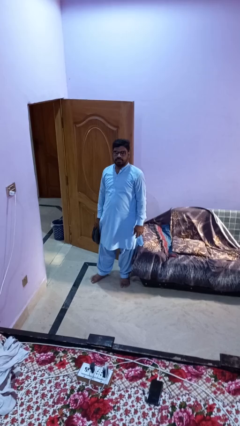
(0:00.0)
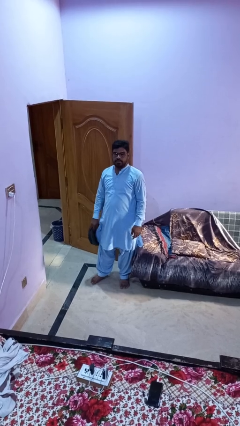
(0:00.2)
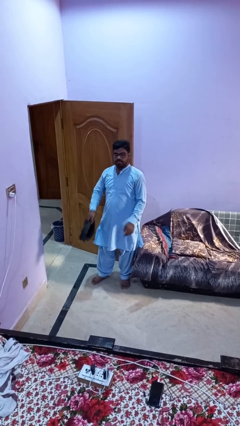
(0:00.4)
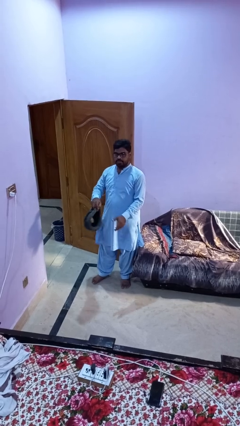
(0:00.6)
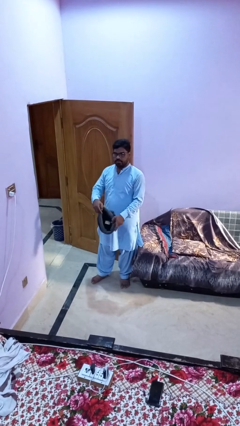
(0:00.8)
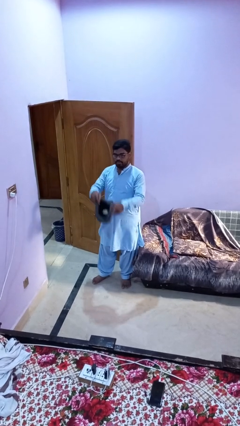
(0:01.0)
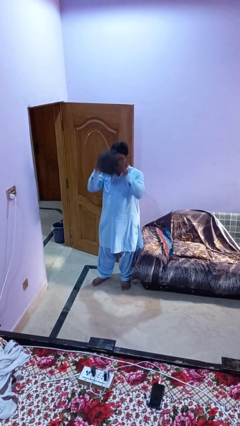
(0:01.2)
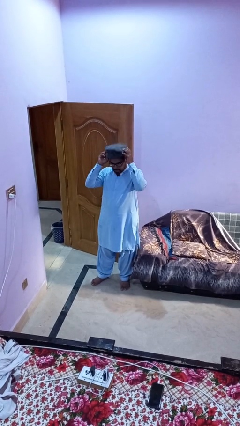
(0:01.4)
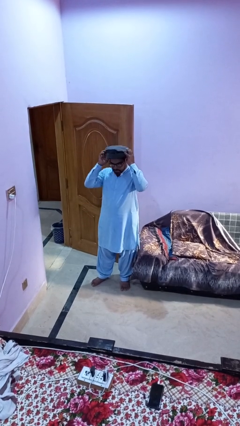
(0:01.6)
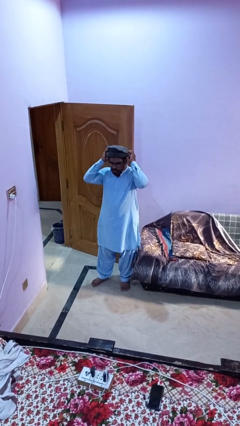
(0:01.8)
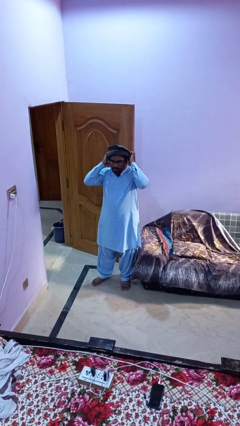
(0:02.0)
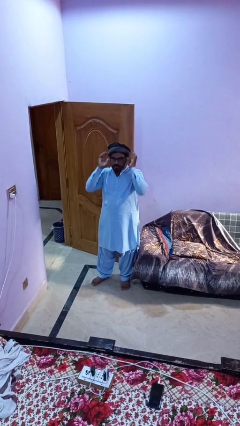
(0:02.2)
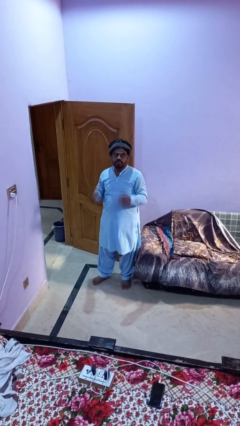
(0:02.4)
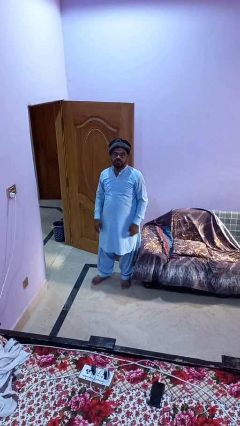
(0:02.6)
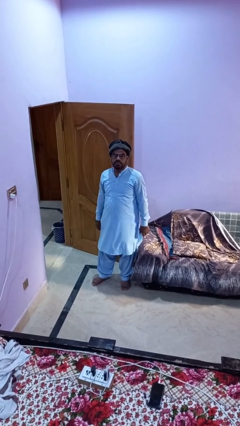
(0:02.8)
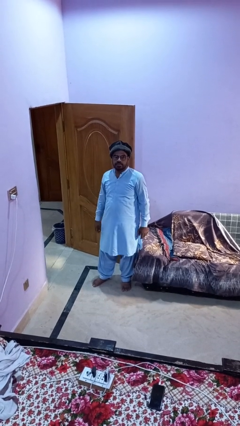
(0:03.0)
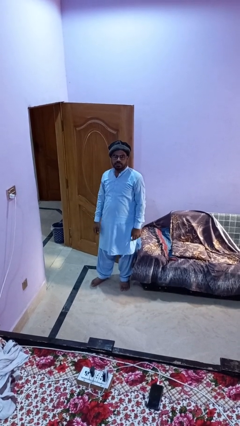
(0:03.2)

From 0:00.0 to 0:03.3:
person puts on hat

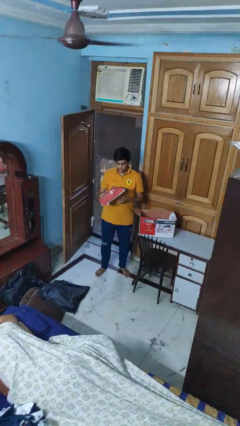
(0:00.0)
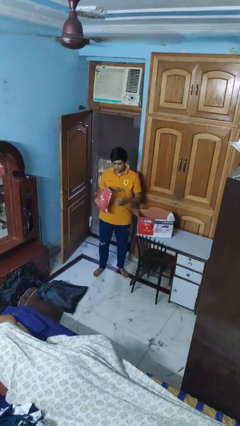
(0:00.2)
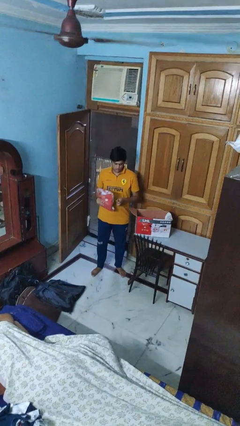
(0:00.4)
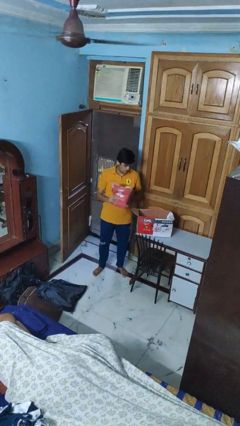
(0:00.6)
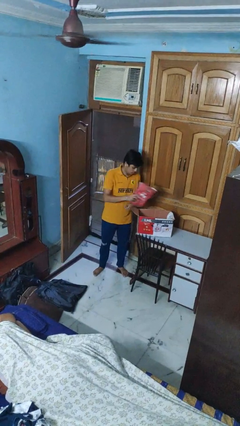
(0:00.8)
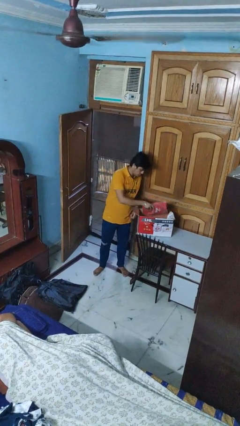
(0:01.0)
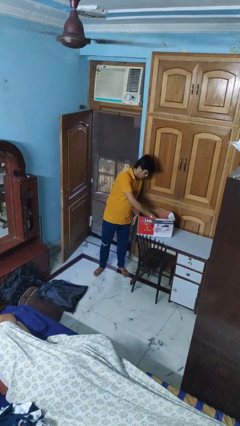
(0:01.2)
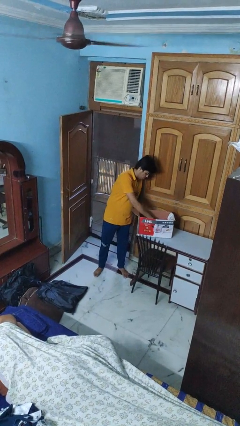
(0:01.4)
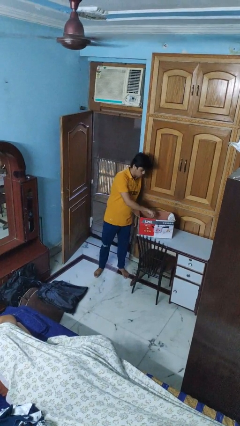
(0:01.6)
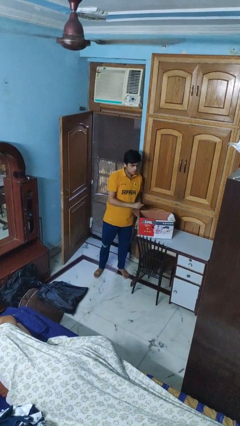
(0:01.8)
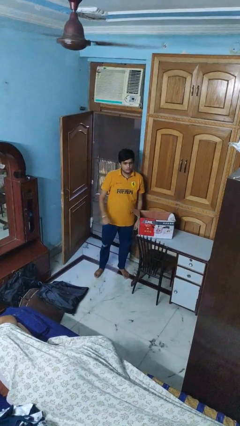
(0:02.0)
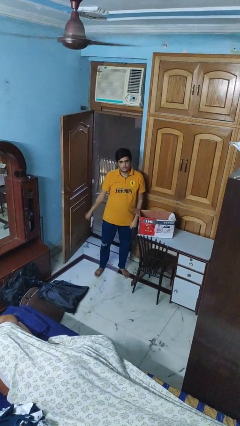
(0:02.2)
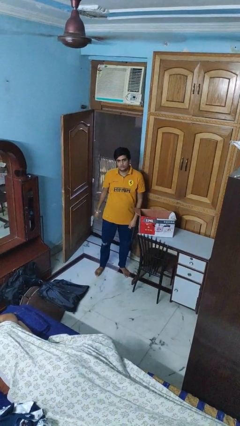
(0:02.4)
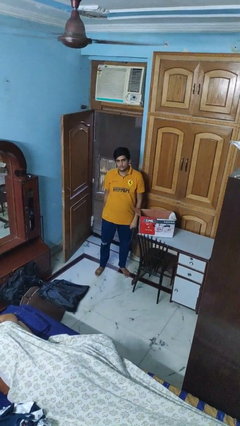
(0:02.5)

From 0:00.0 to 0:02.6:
person puts object into box

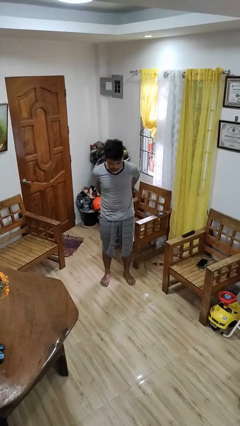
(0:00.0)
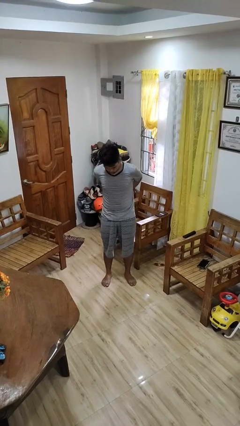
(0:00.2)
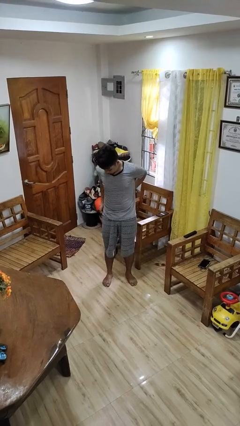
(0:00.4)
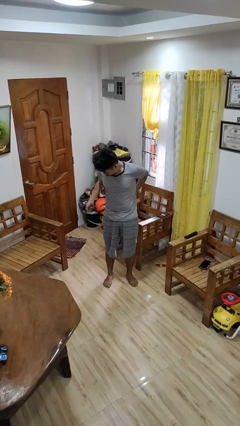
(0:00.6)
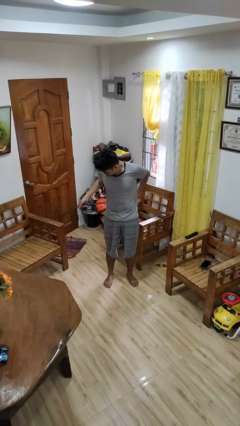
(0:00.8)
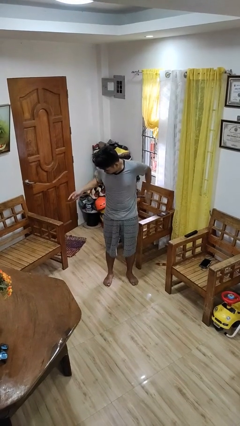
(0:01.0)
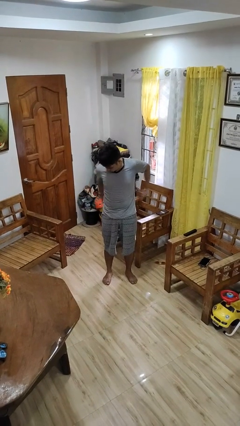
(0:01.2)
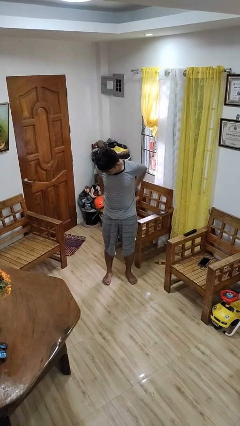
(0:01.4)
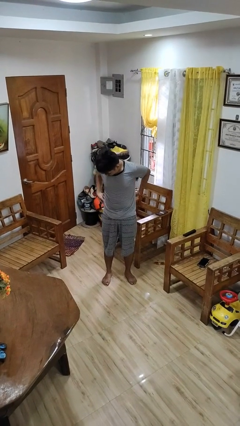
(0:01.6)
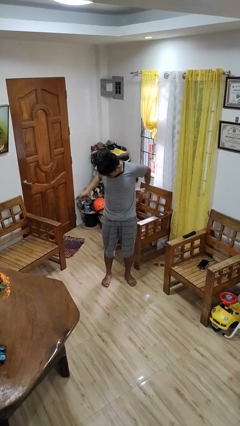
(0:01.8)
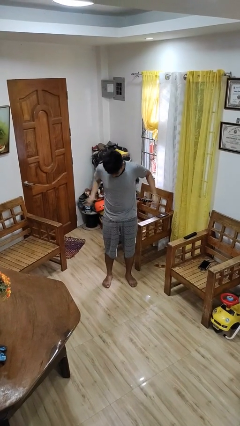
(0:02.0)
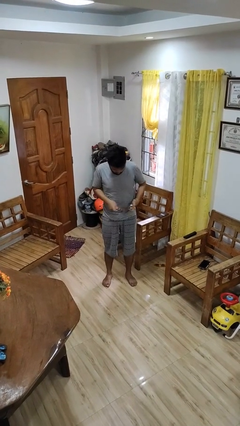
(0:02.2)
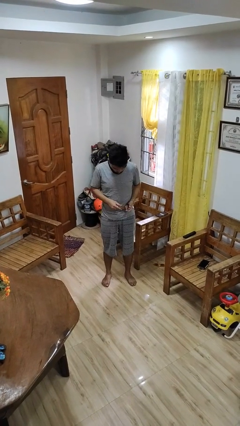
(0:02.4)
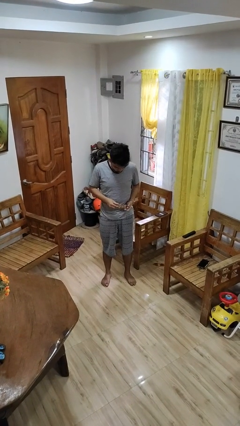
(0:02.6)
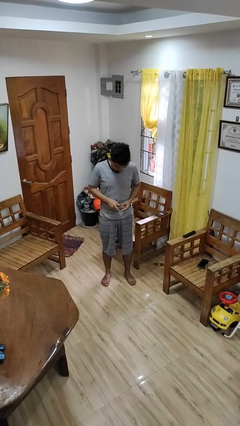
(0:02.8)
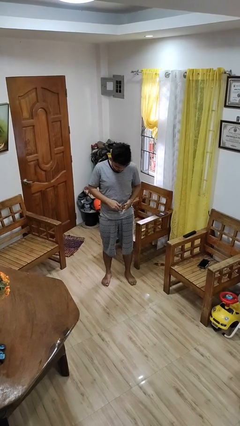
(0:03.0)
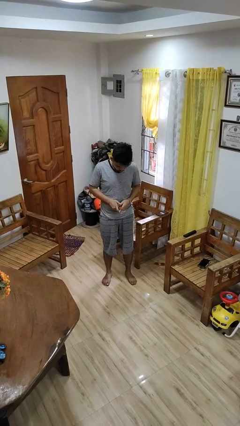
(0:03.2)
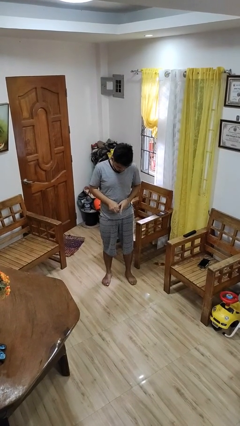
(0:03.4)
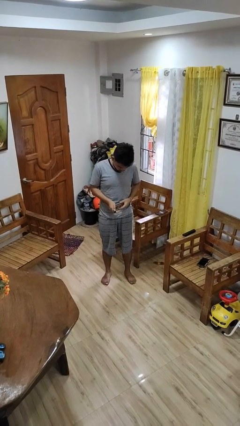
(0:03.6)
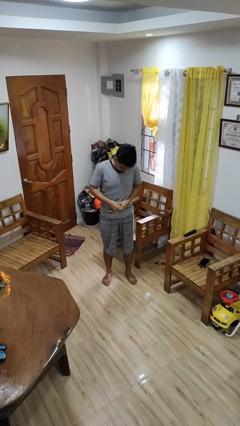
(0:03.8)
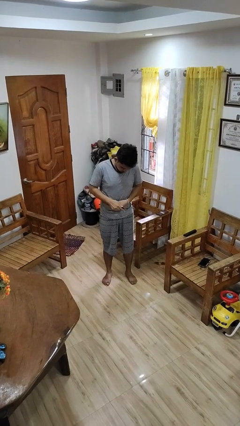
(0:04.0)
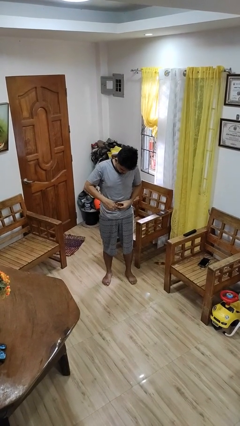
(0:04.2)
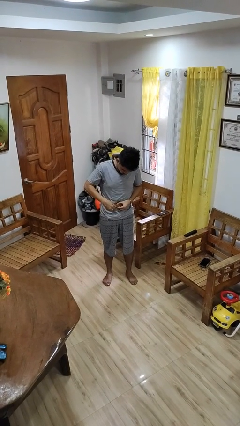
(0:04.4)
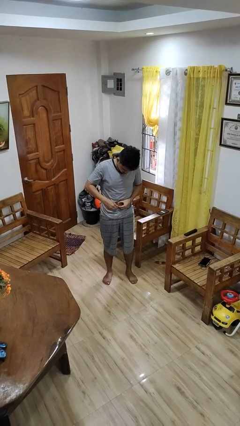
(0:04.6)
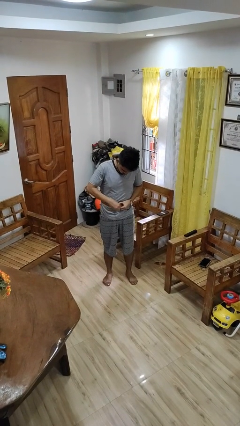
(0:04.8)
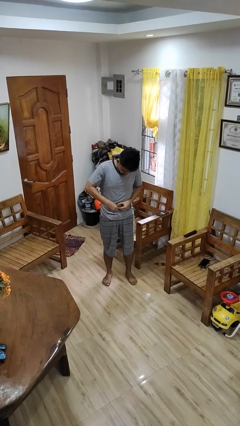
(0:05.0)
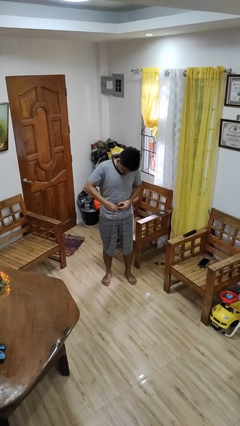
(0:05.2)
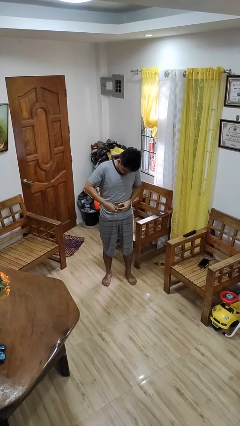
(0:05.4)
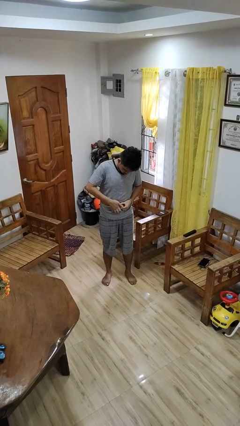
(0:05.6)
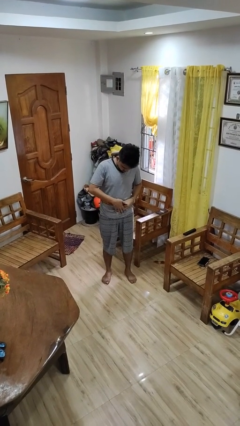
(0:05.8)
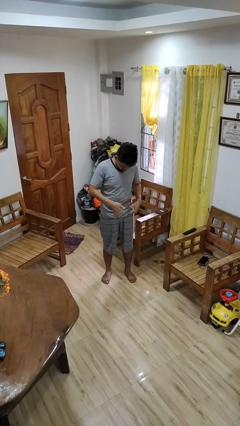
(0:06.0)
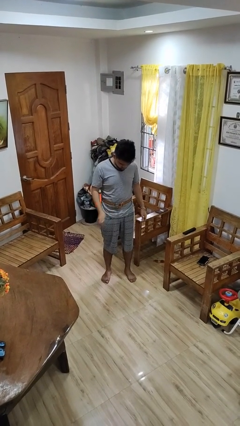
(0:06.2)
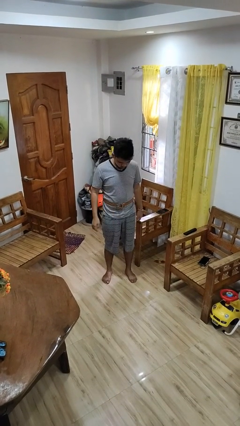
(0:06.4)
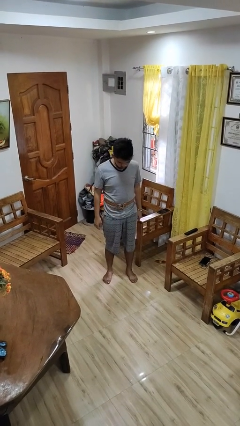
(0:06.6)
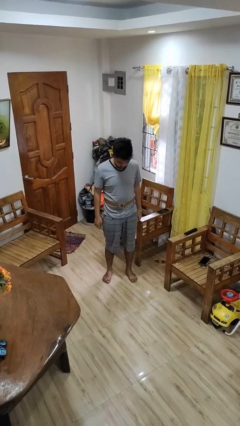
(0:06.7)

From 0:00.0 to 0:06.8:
person puts on belt

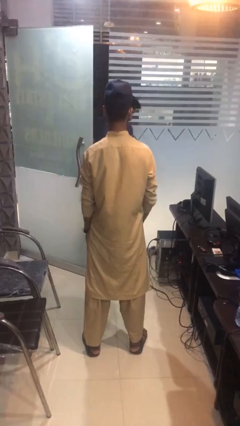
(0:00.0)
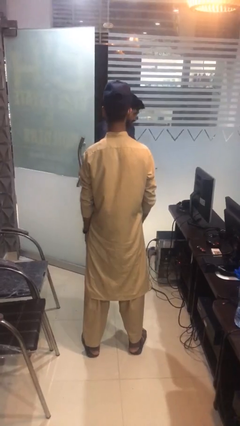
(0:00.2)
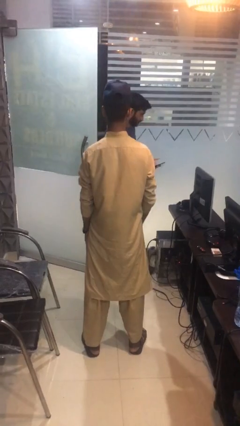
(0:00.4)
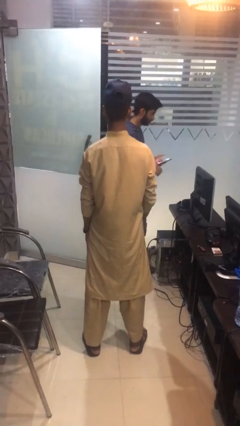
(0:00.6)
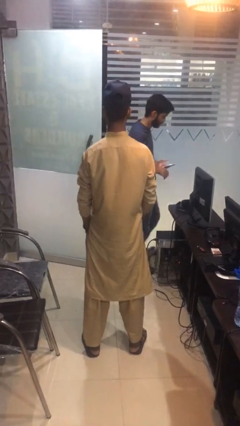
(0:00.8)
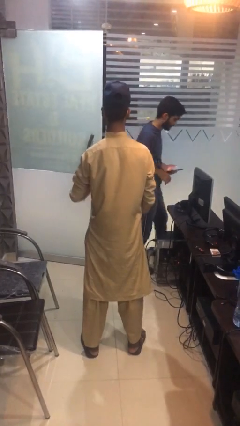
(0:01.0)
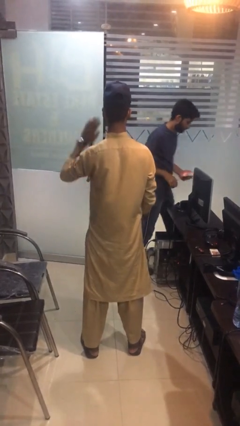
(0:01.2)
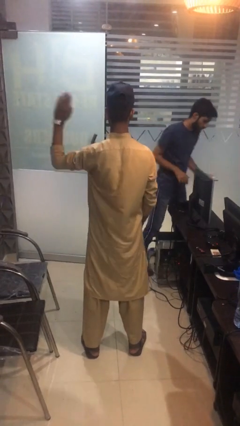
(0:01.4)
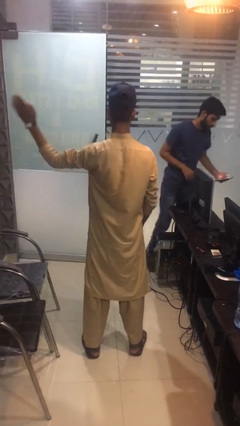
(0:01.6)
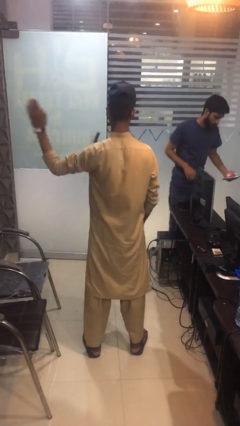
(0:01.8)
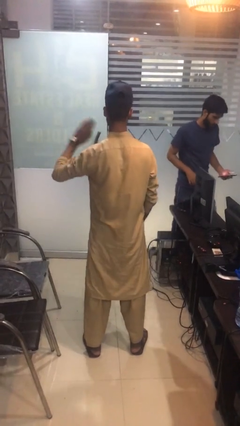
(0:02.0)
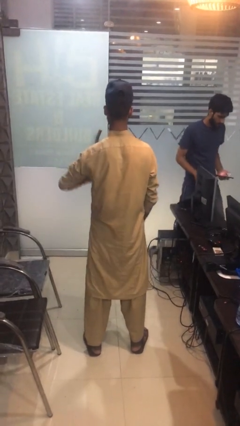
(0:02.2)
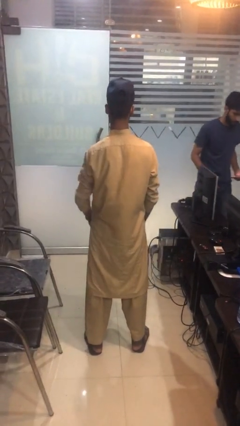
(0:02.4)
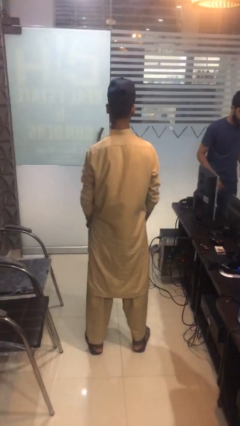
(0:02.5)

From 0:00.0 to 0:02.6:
person gestures swipe left

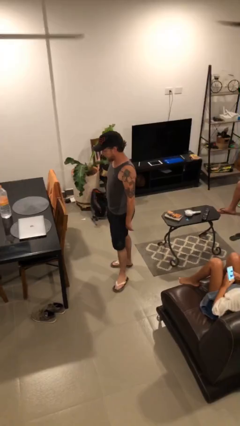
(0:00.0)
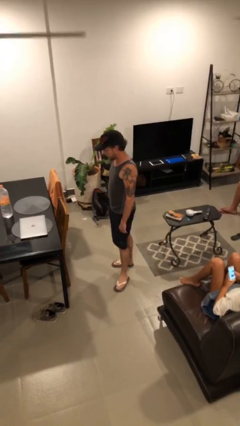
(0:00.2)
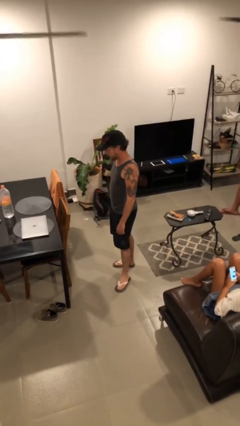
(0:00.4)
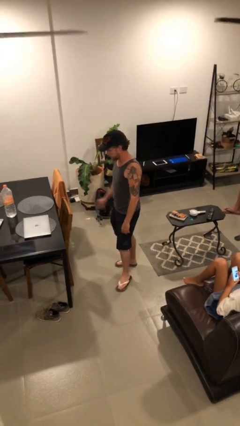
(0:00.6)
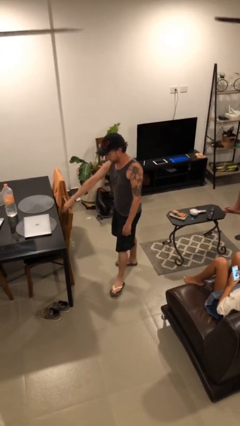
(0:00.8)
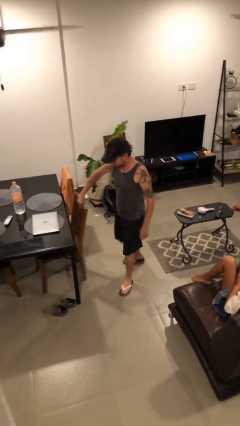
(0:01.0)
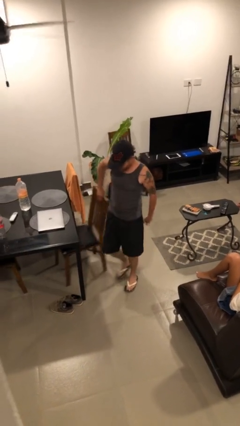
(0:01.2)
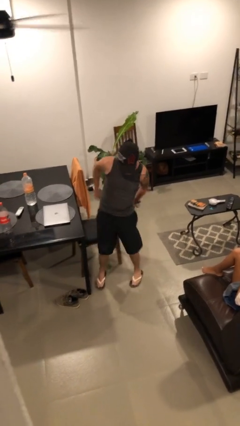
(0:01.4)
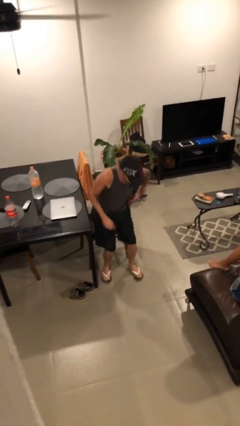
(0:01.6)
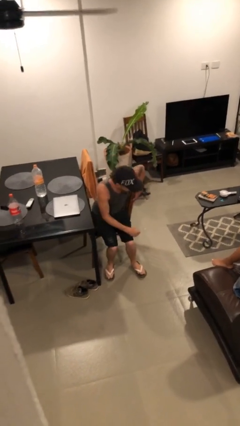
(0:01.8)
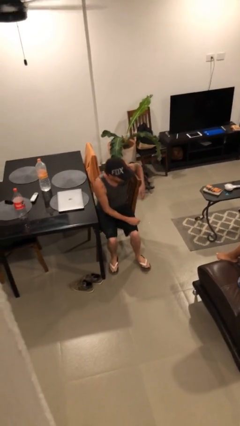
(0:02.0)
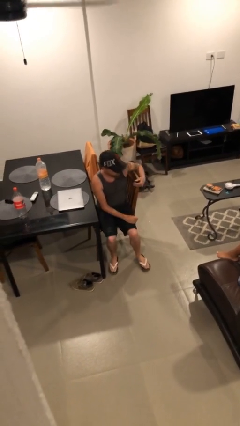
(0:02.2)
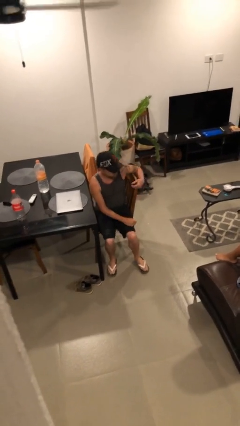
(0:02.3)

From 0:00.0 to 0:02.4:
person sits down
